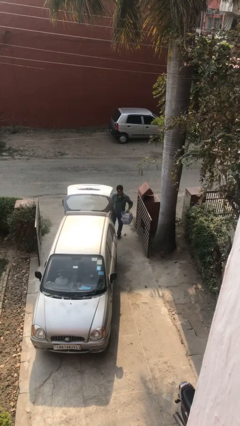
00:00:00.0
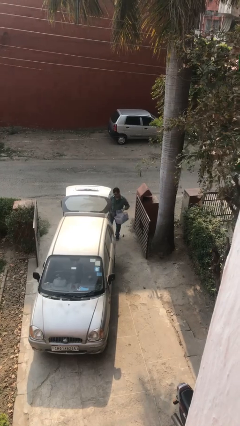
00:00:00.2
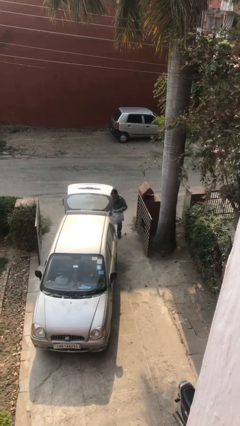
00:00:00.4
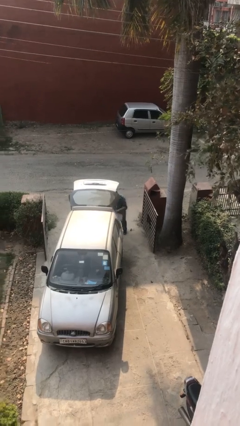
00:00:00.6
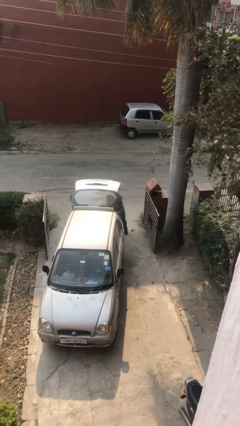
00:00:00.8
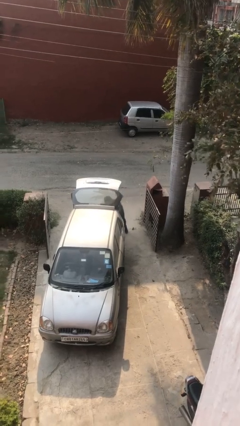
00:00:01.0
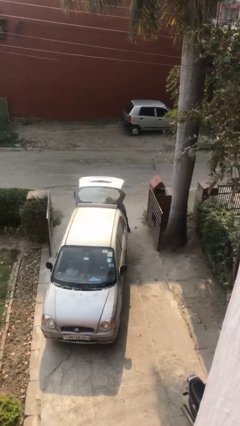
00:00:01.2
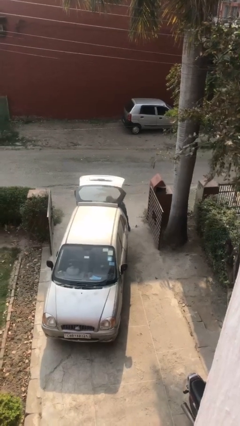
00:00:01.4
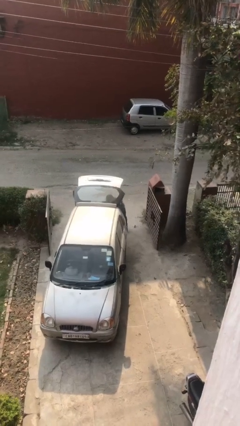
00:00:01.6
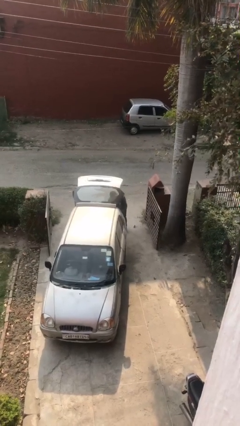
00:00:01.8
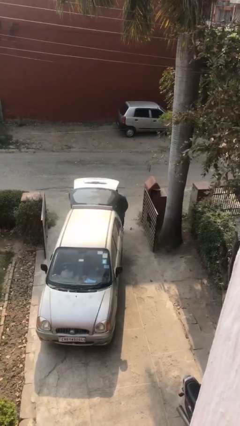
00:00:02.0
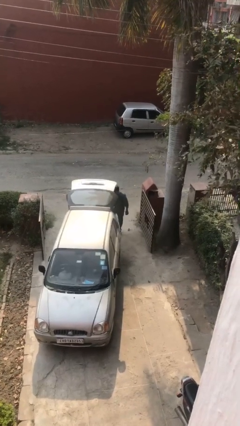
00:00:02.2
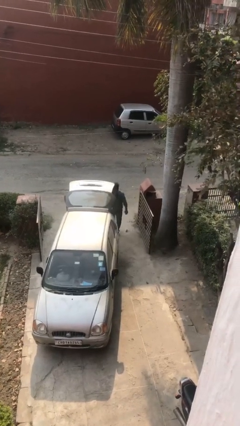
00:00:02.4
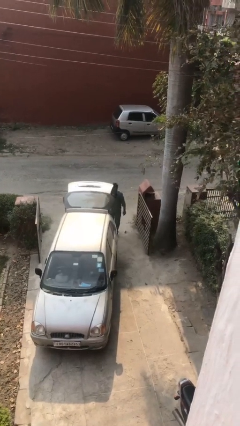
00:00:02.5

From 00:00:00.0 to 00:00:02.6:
person loads car

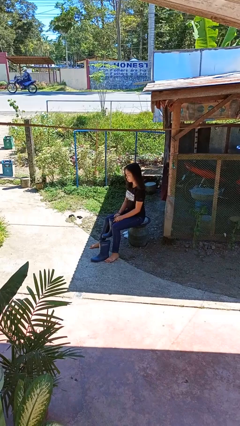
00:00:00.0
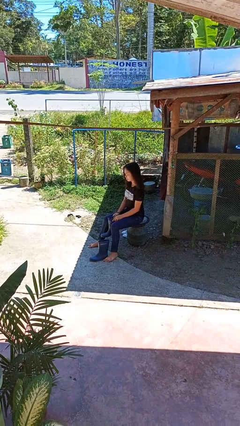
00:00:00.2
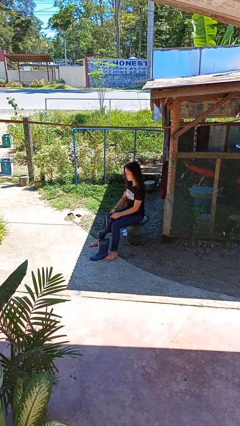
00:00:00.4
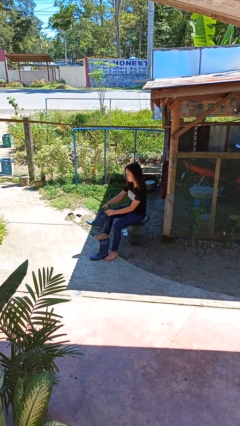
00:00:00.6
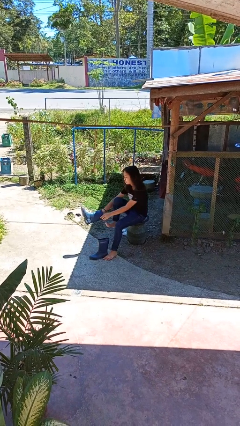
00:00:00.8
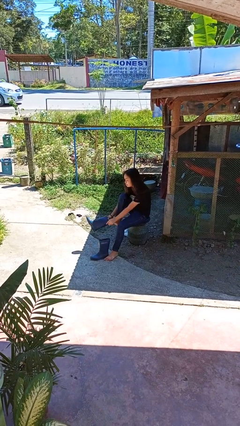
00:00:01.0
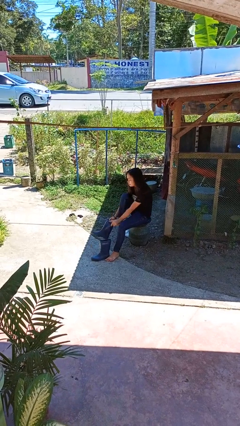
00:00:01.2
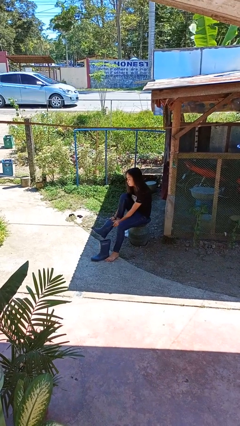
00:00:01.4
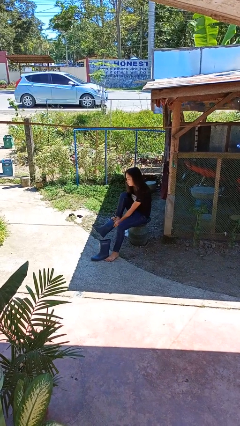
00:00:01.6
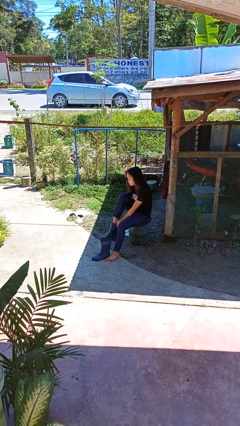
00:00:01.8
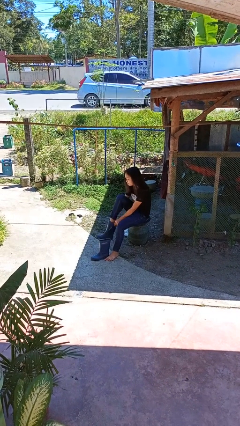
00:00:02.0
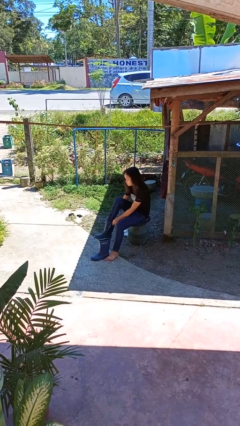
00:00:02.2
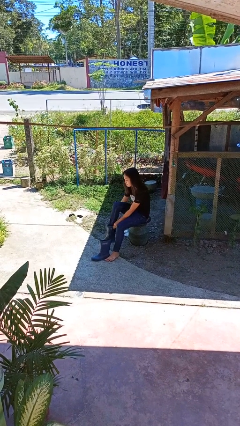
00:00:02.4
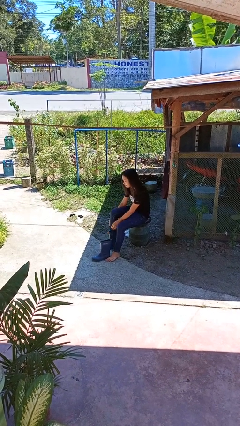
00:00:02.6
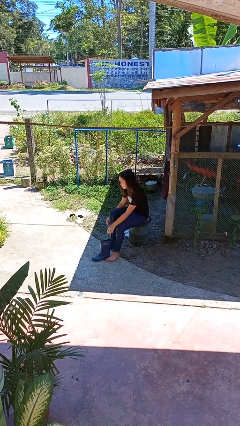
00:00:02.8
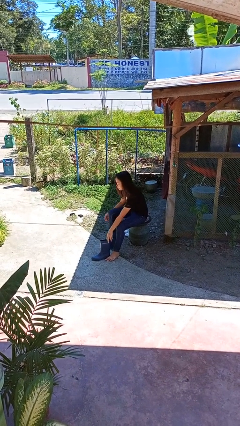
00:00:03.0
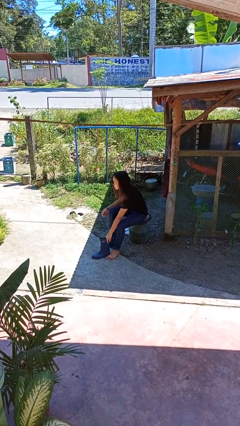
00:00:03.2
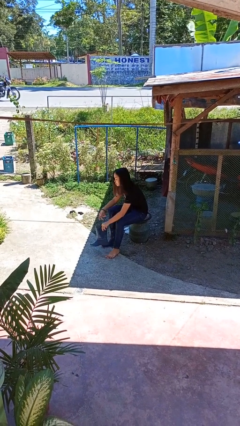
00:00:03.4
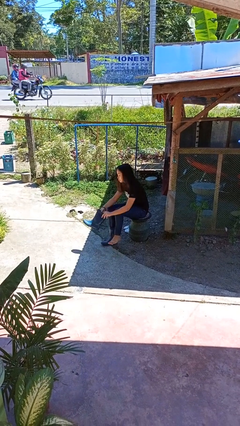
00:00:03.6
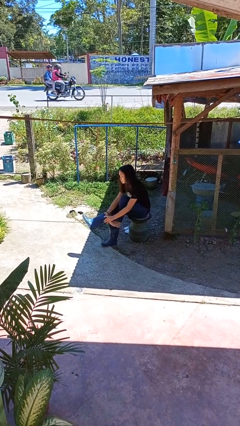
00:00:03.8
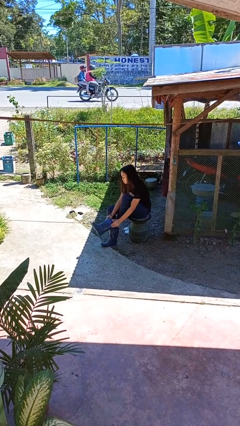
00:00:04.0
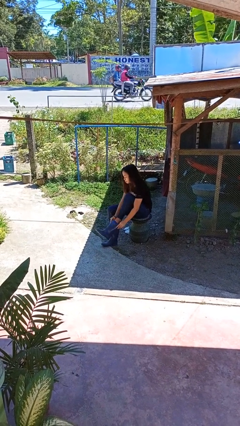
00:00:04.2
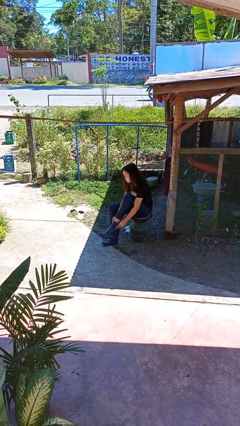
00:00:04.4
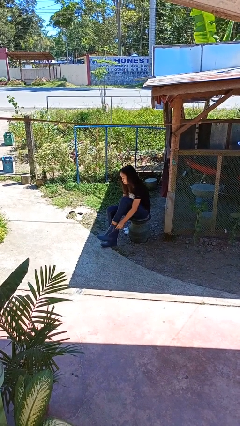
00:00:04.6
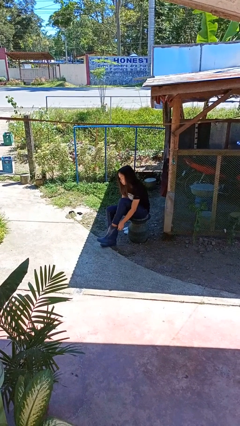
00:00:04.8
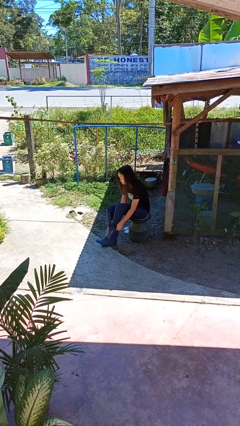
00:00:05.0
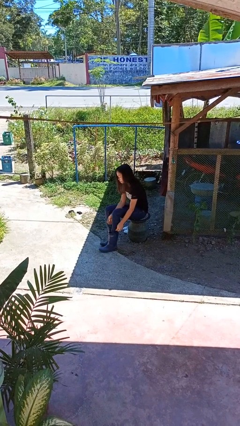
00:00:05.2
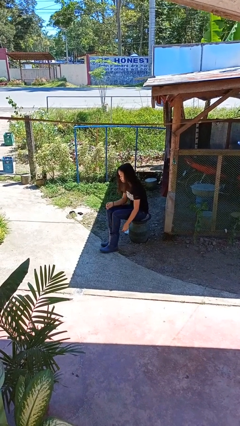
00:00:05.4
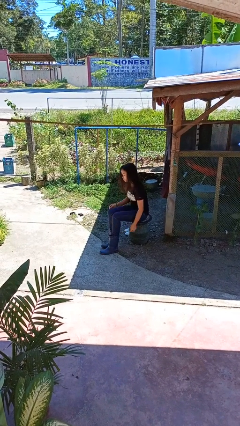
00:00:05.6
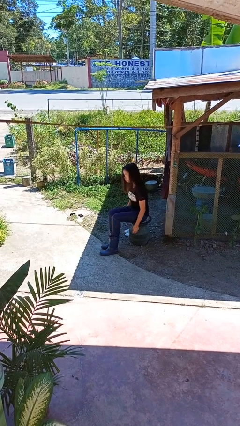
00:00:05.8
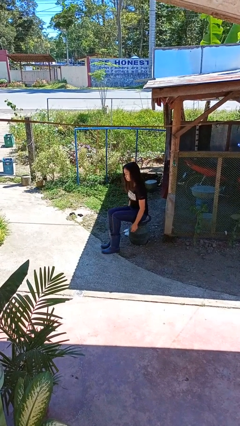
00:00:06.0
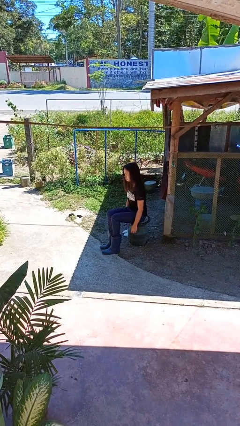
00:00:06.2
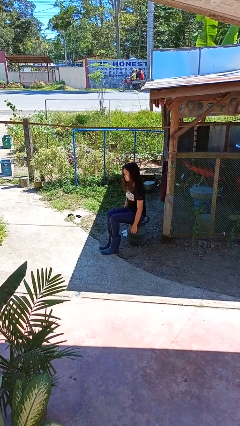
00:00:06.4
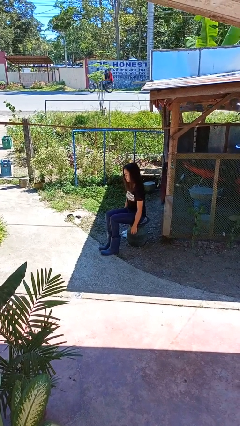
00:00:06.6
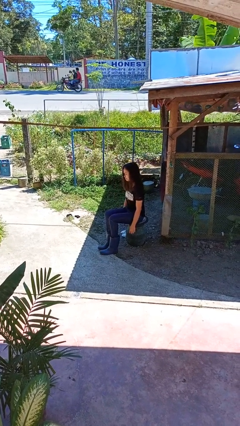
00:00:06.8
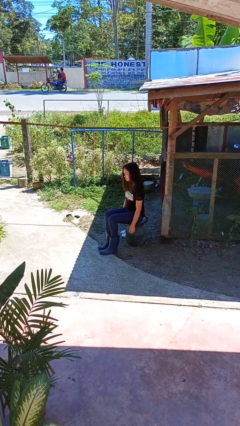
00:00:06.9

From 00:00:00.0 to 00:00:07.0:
person puts on boots

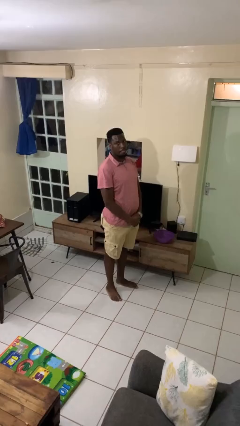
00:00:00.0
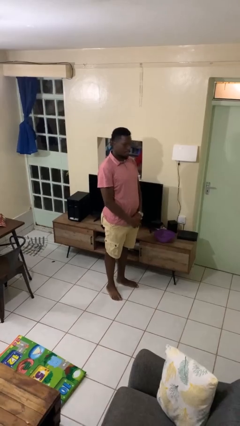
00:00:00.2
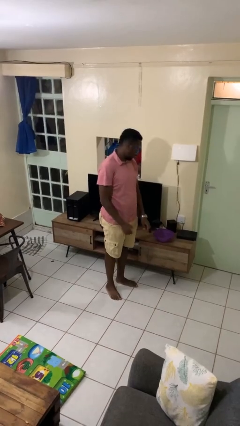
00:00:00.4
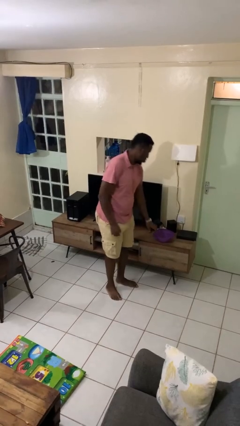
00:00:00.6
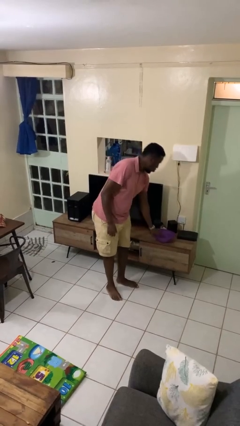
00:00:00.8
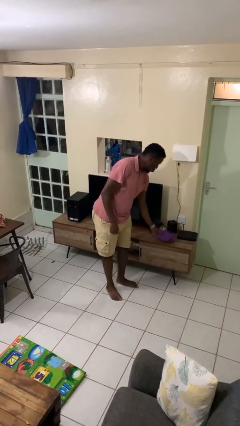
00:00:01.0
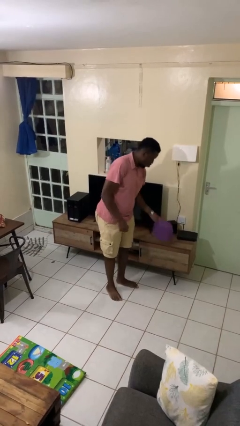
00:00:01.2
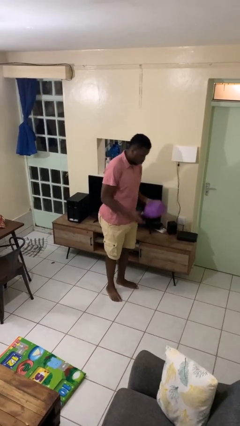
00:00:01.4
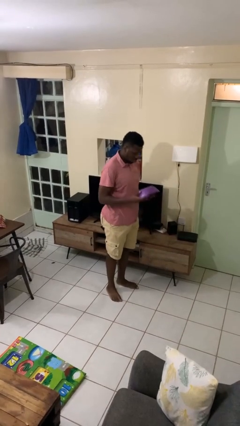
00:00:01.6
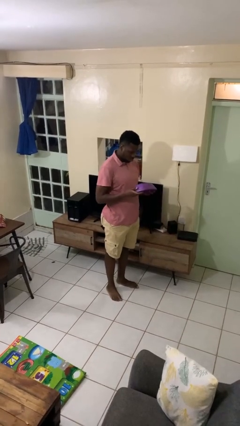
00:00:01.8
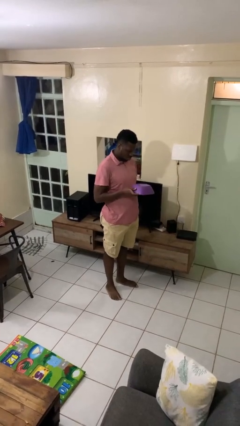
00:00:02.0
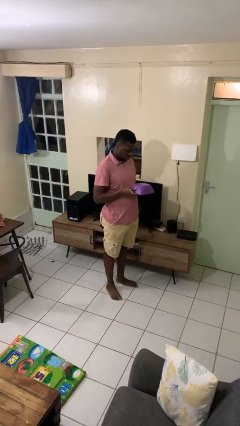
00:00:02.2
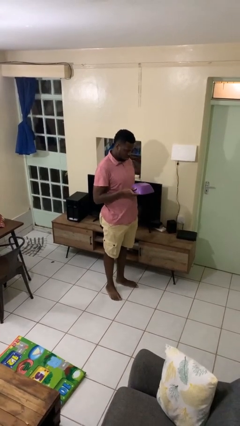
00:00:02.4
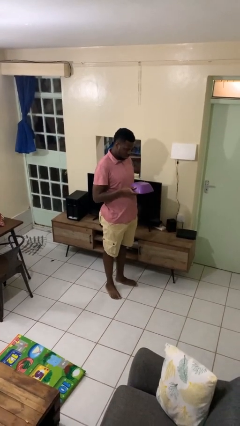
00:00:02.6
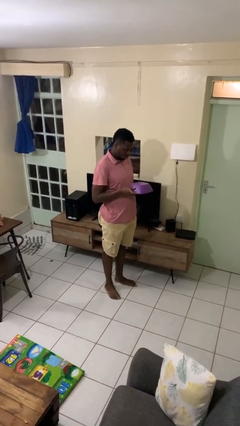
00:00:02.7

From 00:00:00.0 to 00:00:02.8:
person picks up object from countertop

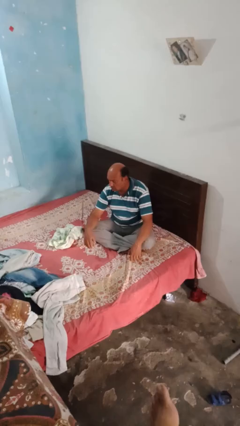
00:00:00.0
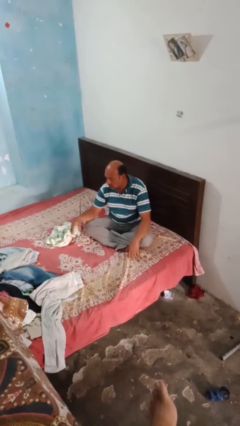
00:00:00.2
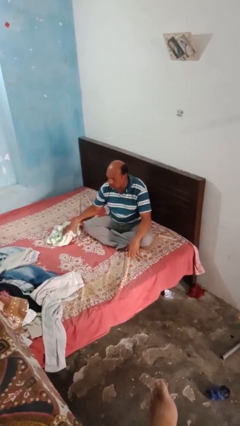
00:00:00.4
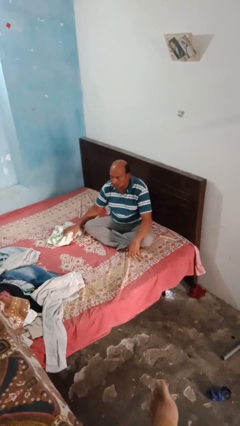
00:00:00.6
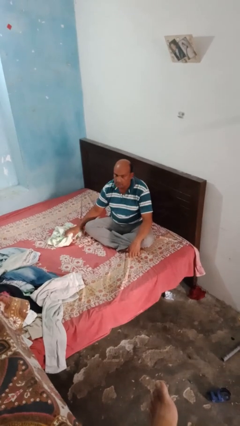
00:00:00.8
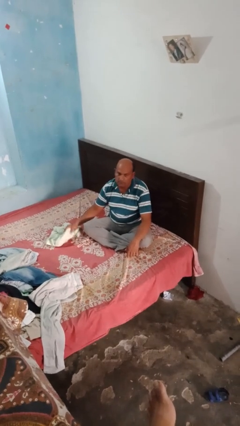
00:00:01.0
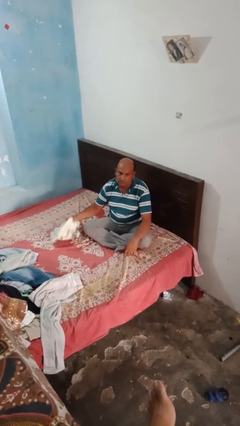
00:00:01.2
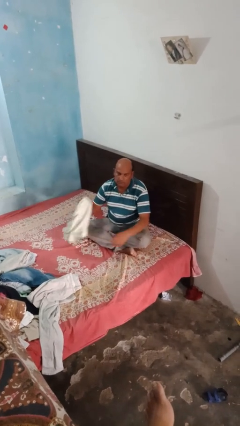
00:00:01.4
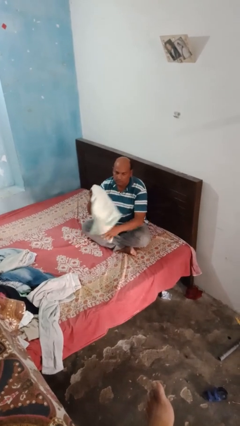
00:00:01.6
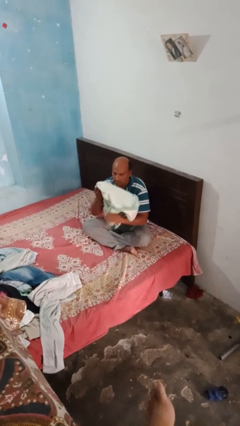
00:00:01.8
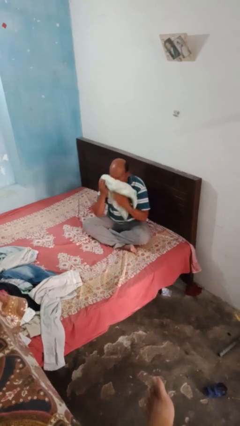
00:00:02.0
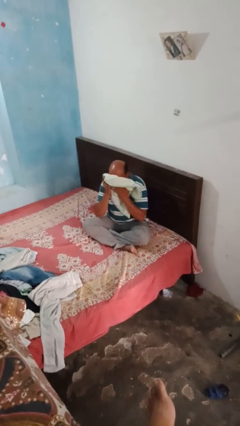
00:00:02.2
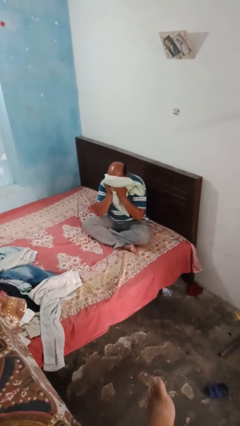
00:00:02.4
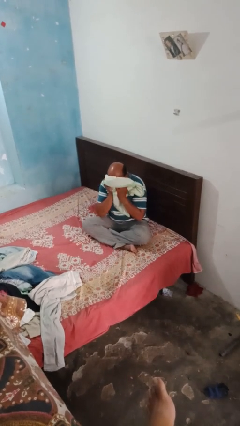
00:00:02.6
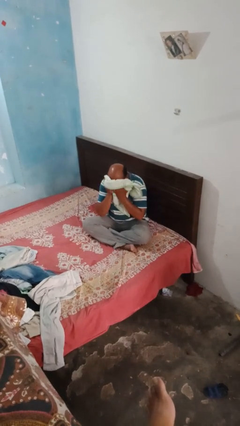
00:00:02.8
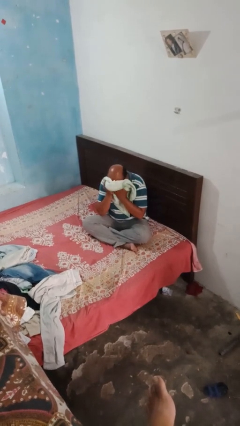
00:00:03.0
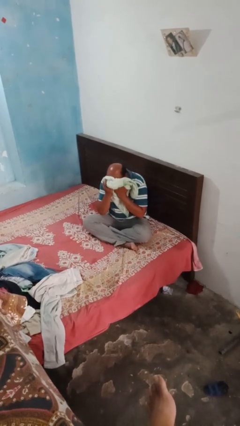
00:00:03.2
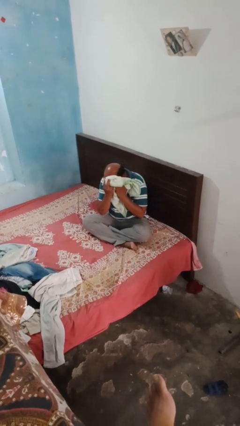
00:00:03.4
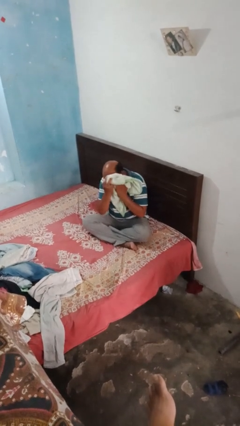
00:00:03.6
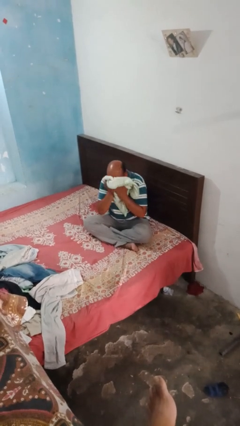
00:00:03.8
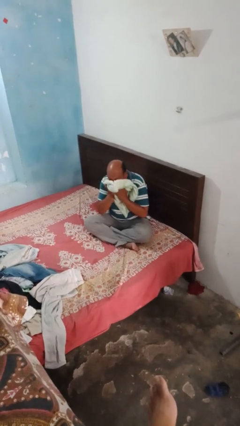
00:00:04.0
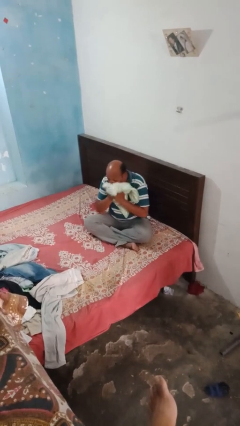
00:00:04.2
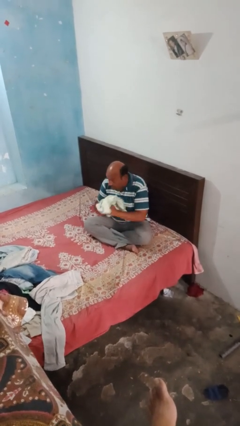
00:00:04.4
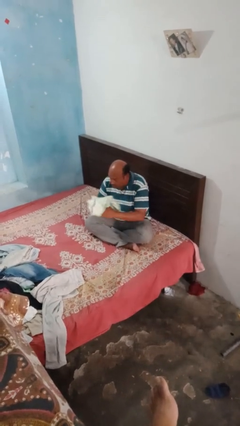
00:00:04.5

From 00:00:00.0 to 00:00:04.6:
person wipes mouth with napkin

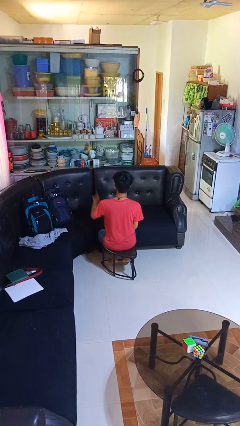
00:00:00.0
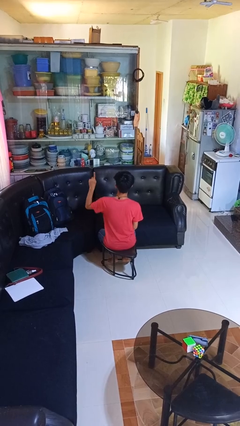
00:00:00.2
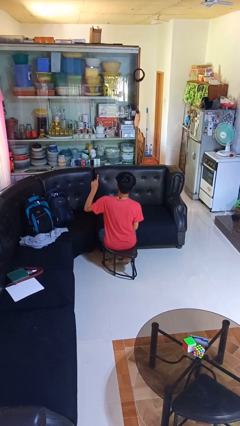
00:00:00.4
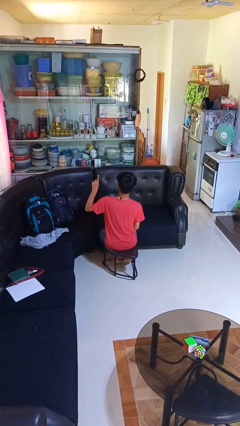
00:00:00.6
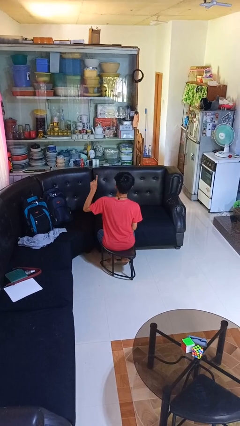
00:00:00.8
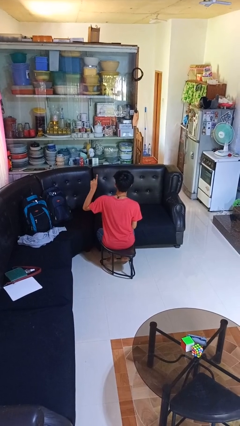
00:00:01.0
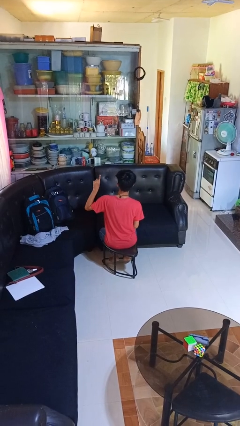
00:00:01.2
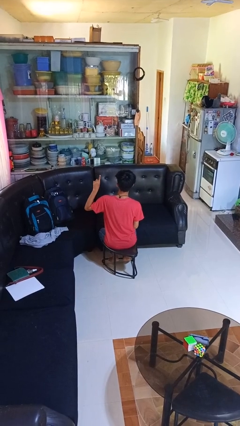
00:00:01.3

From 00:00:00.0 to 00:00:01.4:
person gestures number one
